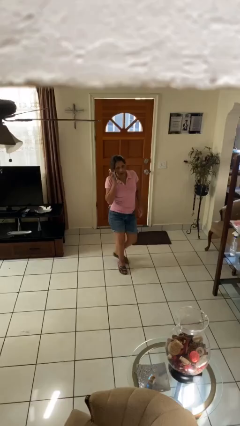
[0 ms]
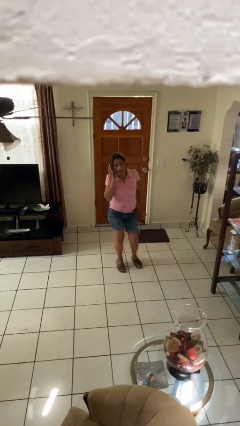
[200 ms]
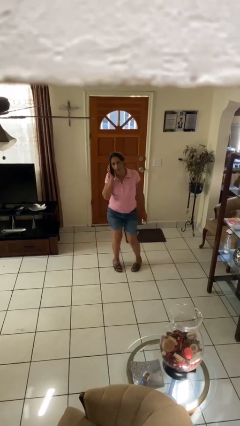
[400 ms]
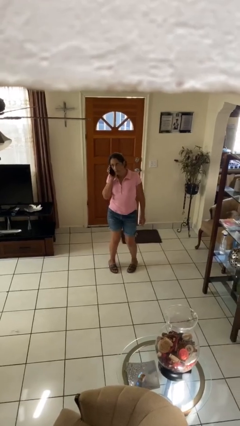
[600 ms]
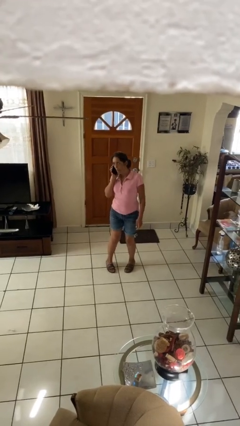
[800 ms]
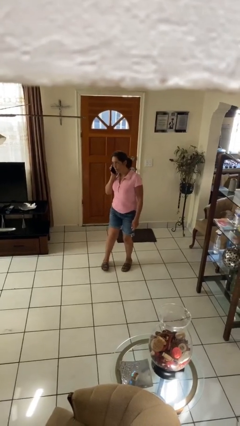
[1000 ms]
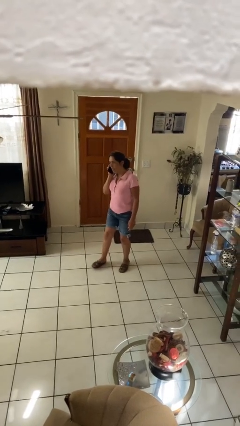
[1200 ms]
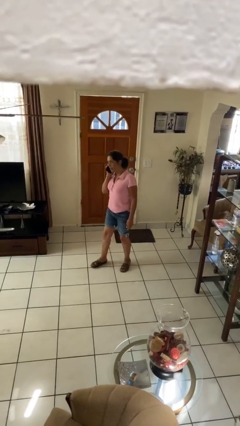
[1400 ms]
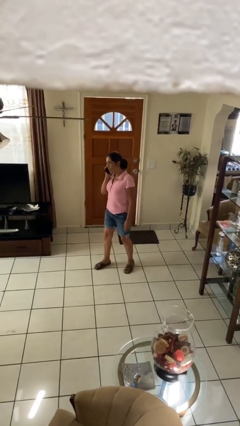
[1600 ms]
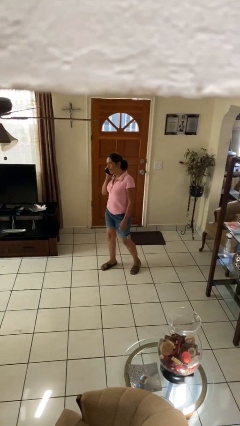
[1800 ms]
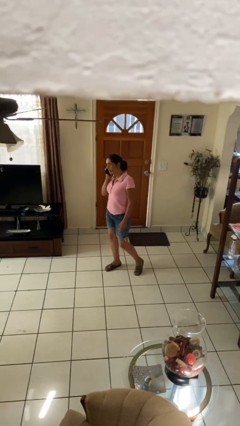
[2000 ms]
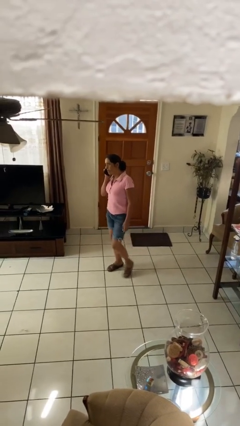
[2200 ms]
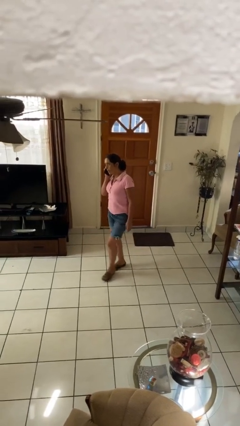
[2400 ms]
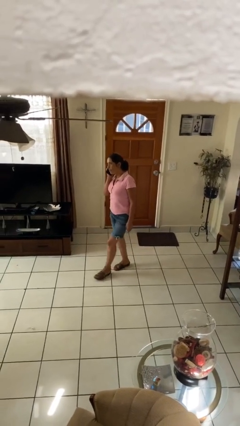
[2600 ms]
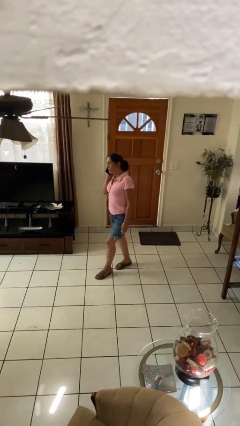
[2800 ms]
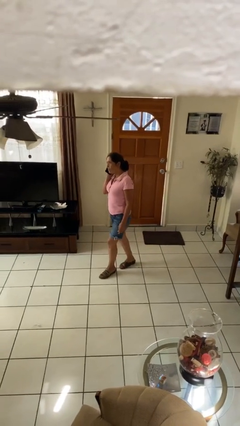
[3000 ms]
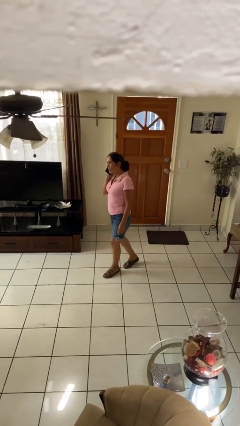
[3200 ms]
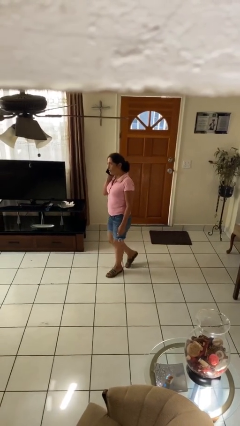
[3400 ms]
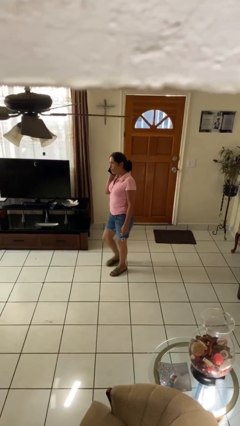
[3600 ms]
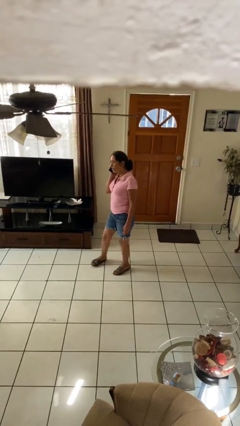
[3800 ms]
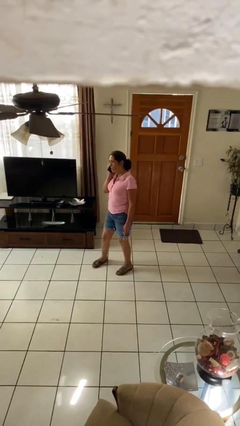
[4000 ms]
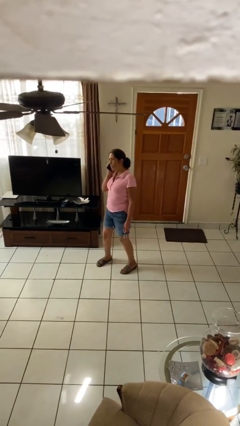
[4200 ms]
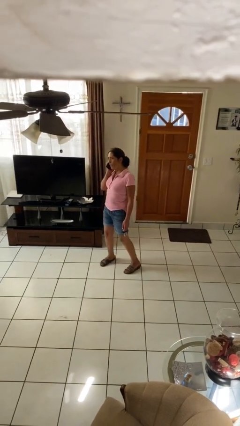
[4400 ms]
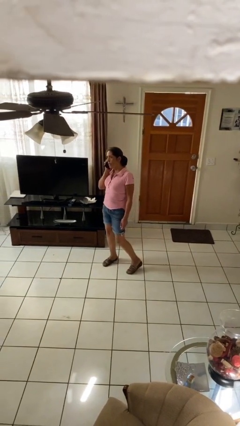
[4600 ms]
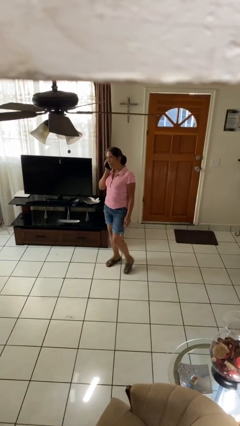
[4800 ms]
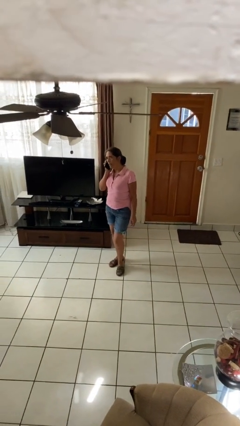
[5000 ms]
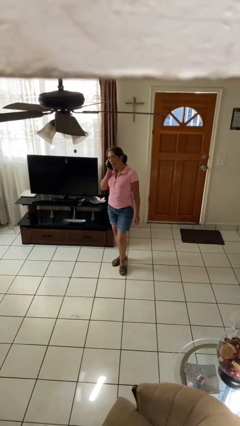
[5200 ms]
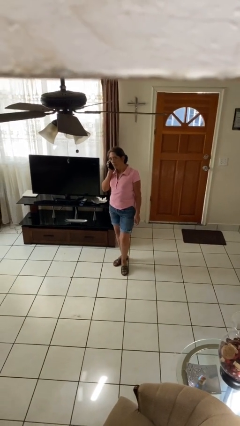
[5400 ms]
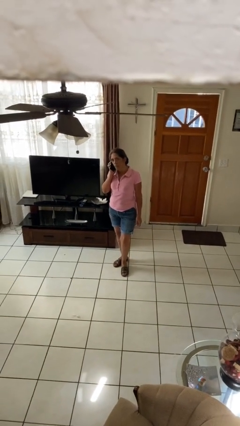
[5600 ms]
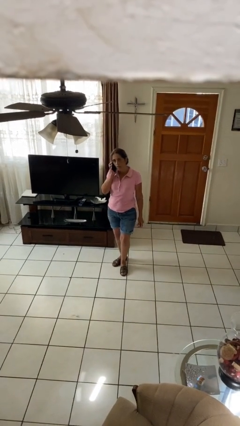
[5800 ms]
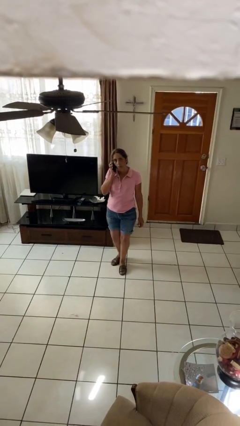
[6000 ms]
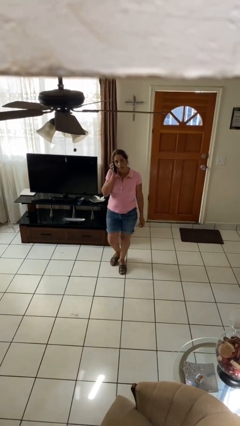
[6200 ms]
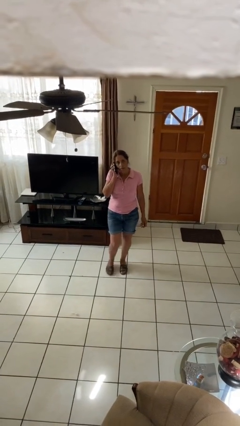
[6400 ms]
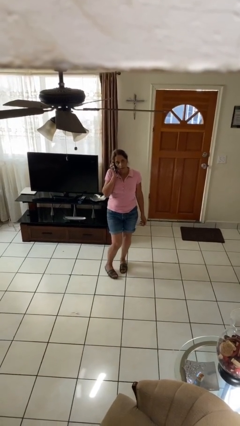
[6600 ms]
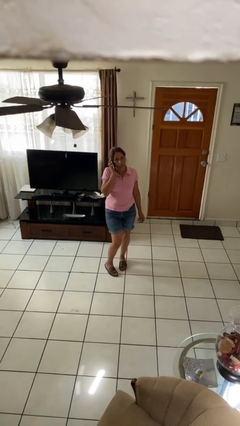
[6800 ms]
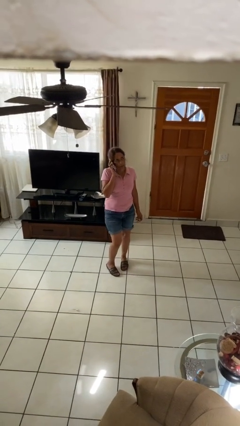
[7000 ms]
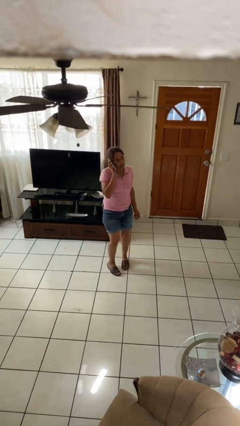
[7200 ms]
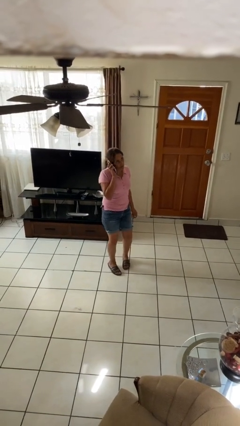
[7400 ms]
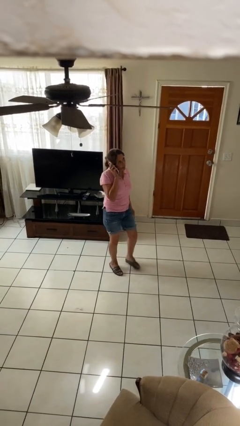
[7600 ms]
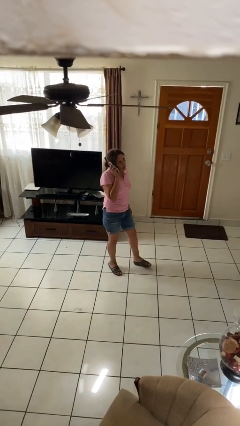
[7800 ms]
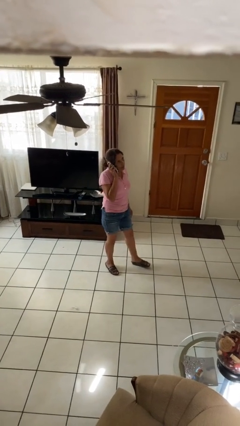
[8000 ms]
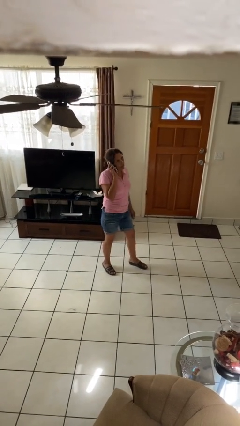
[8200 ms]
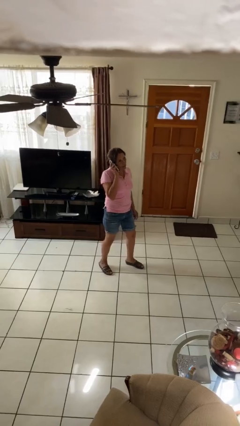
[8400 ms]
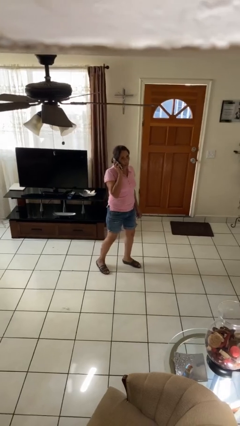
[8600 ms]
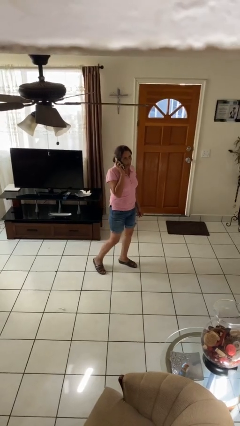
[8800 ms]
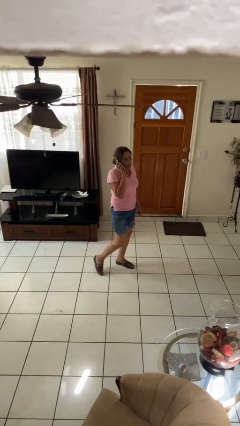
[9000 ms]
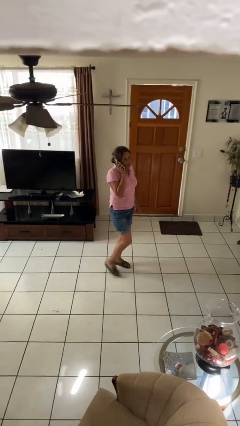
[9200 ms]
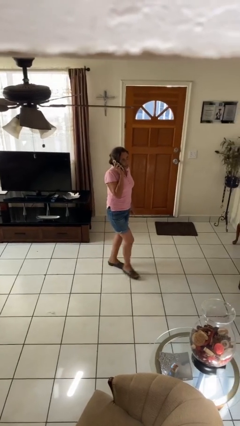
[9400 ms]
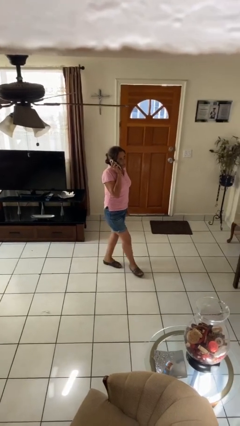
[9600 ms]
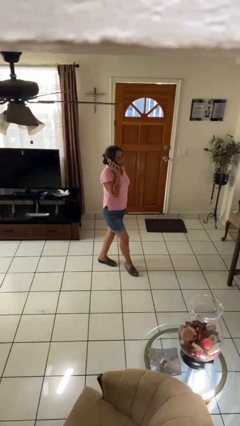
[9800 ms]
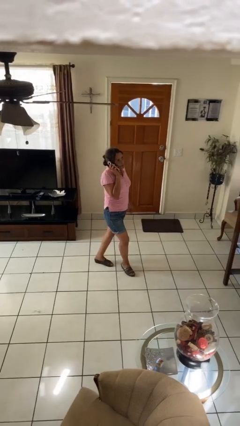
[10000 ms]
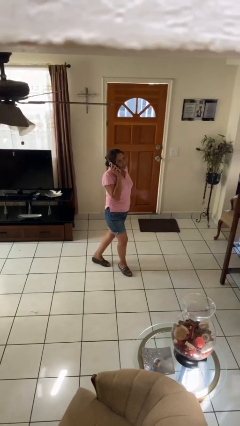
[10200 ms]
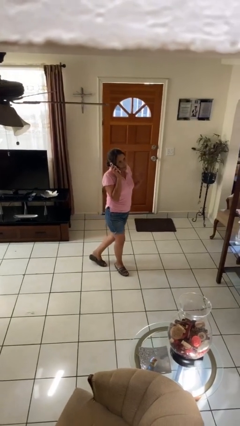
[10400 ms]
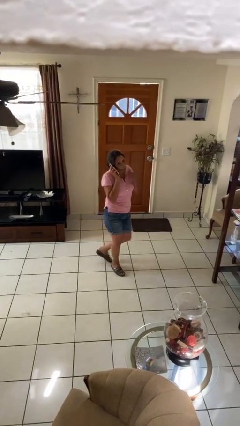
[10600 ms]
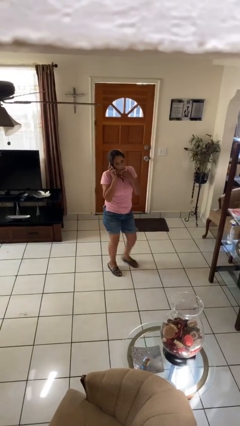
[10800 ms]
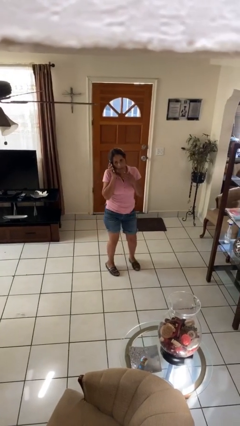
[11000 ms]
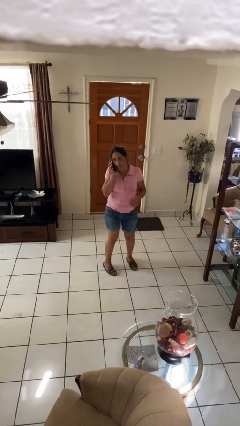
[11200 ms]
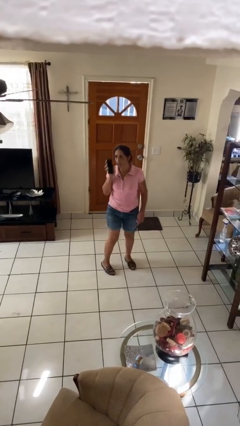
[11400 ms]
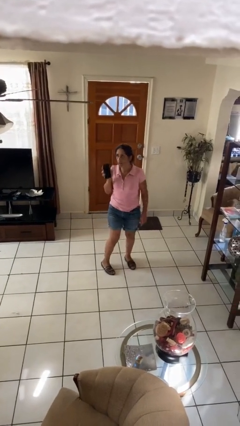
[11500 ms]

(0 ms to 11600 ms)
person talks on phone

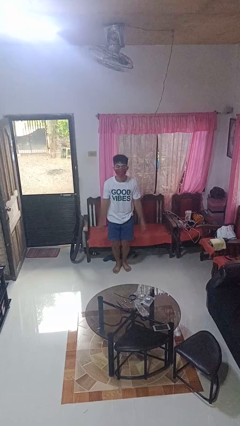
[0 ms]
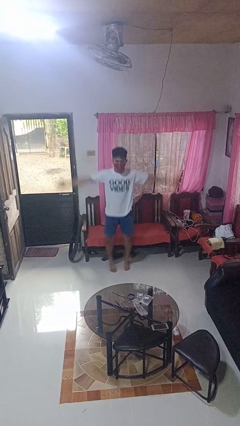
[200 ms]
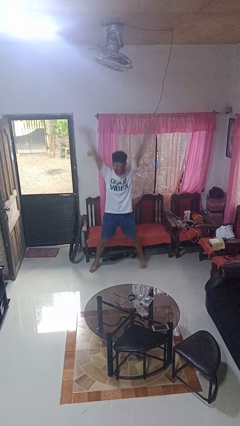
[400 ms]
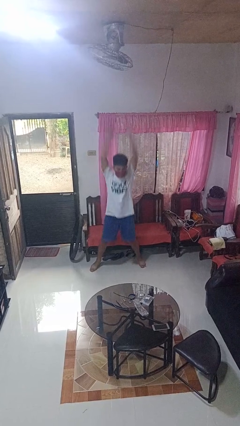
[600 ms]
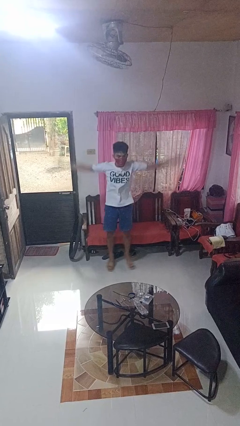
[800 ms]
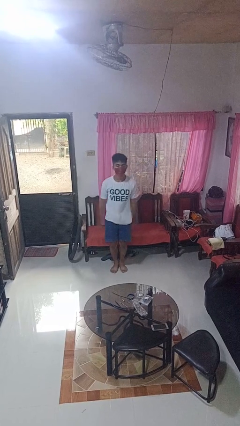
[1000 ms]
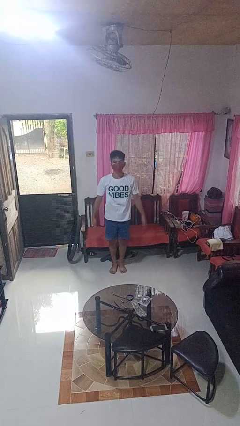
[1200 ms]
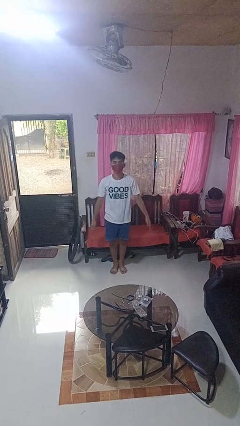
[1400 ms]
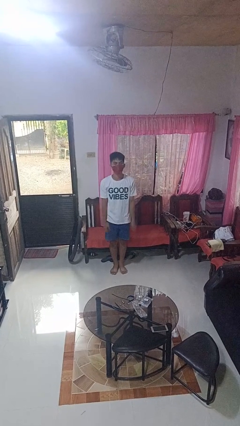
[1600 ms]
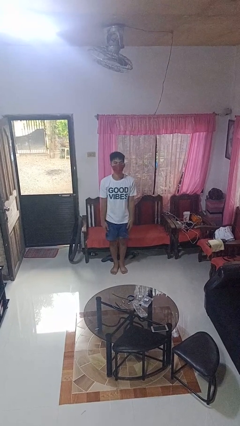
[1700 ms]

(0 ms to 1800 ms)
person exercises with jumping jacks

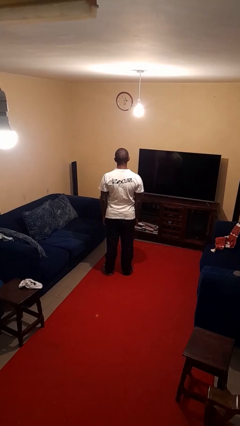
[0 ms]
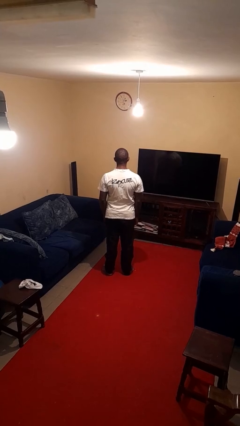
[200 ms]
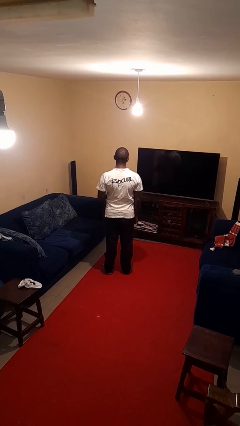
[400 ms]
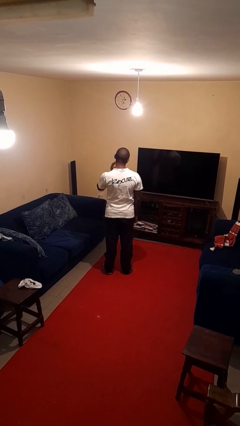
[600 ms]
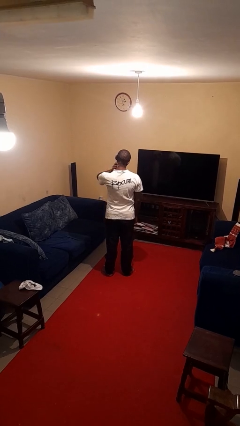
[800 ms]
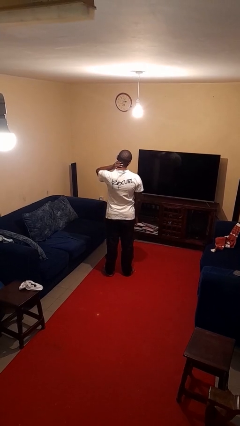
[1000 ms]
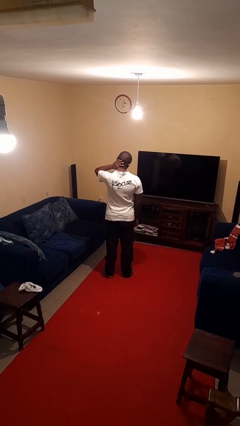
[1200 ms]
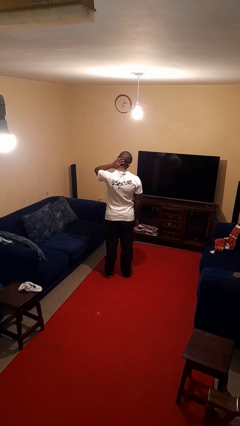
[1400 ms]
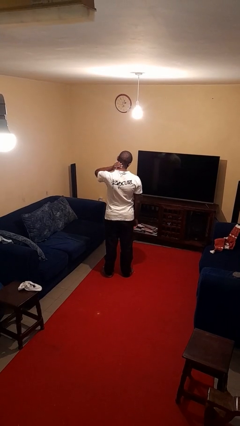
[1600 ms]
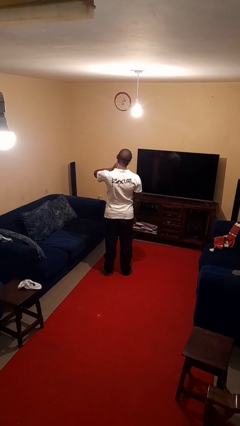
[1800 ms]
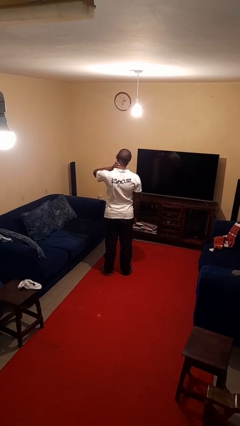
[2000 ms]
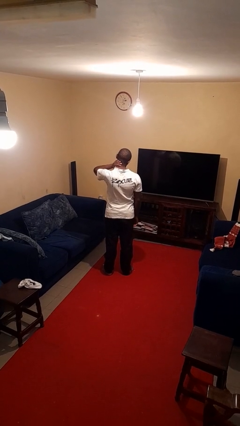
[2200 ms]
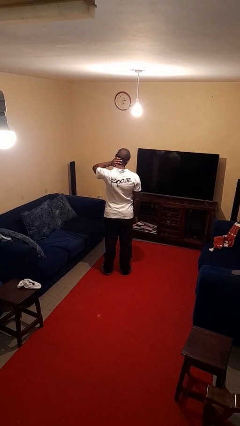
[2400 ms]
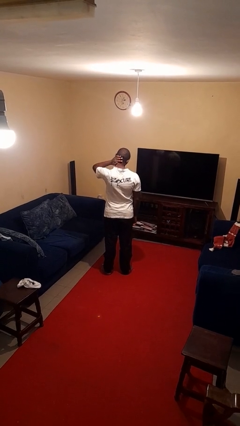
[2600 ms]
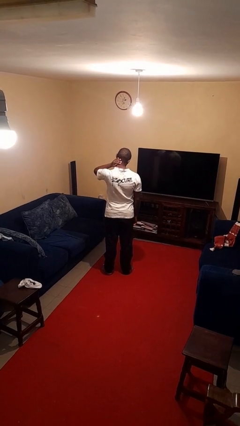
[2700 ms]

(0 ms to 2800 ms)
person rubs neck

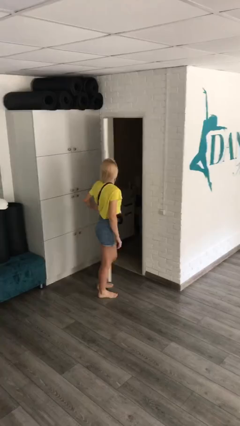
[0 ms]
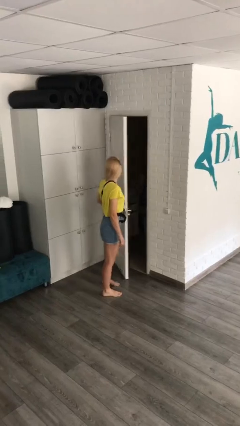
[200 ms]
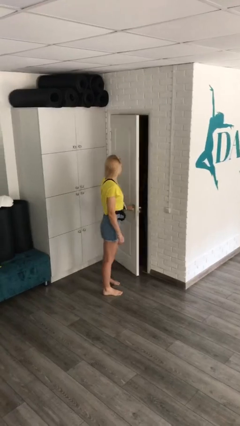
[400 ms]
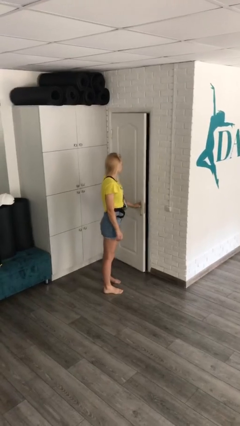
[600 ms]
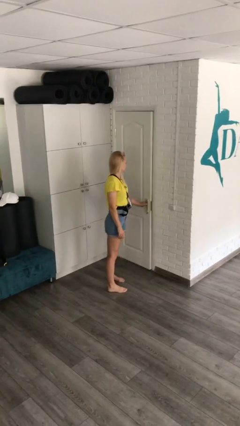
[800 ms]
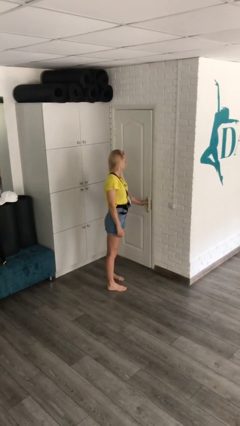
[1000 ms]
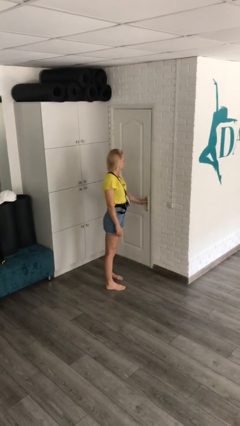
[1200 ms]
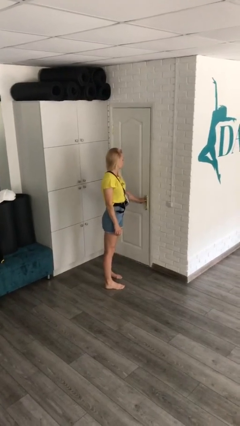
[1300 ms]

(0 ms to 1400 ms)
person closes facility door

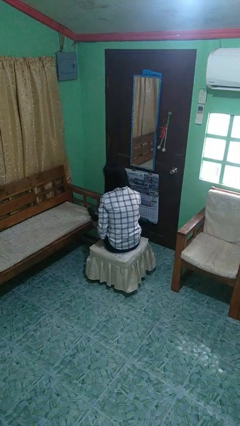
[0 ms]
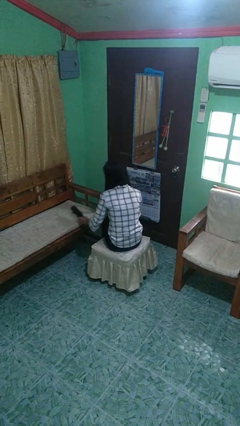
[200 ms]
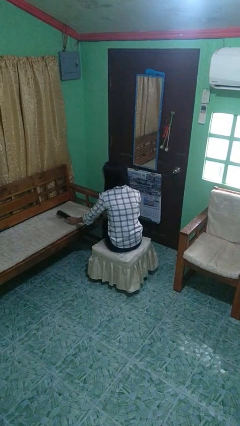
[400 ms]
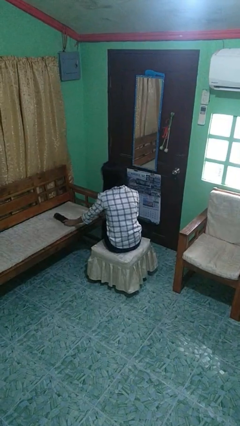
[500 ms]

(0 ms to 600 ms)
person puts down object on couch
